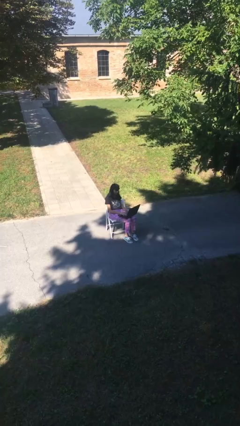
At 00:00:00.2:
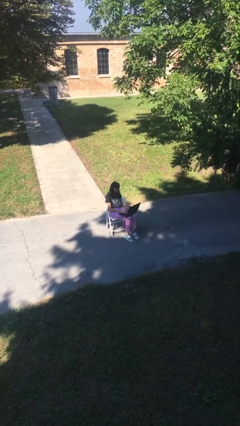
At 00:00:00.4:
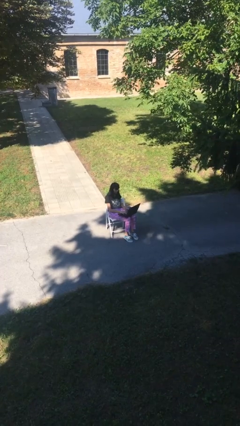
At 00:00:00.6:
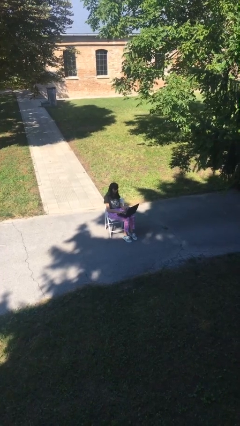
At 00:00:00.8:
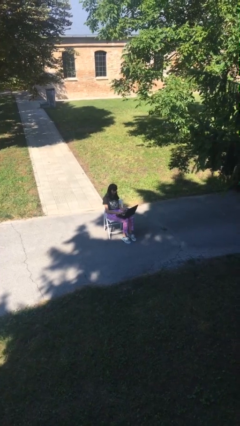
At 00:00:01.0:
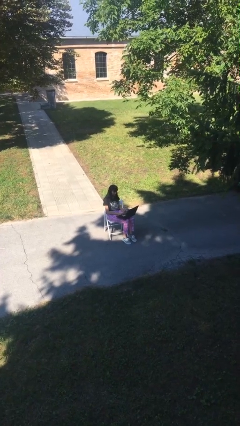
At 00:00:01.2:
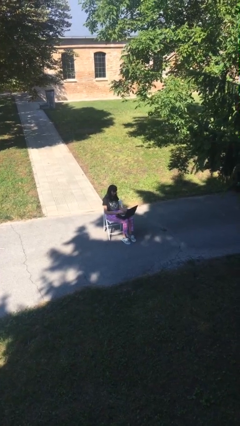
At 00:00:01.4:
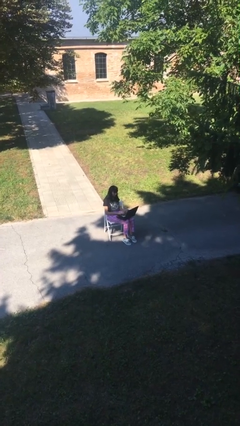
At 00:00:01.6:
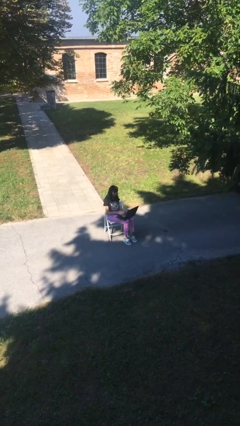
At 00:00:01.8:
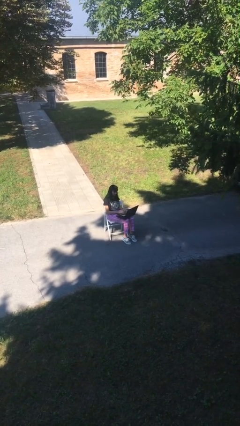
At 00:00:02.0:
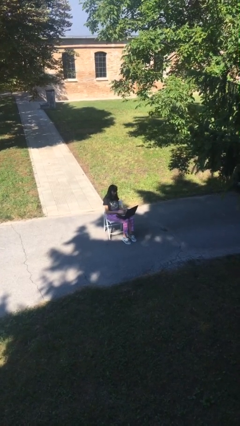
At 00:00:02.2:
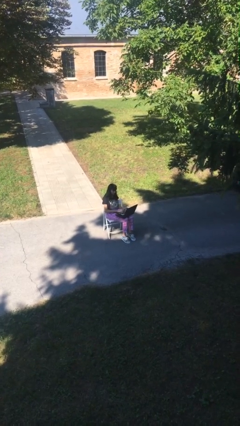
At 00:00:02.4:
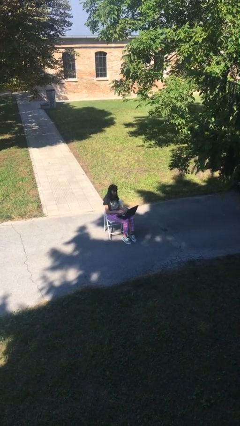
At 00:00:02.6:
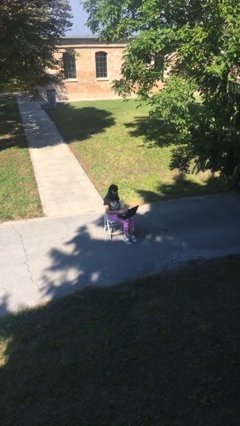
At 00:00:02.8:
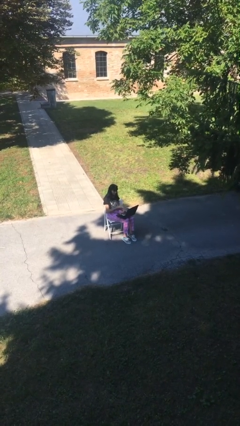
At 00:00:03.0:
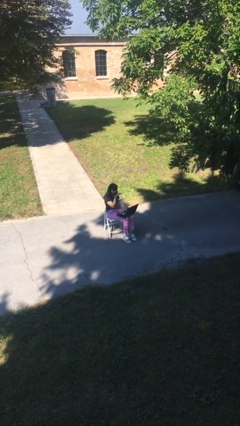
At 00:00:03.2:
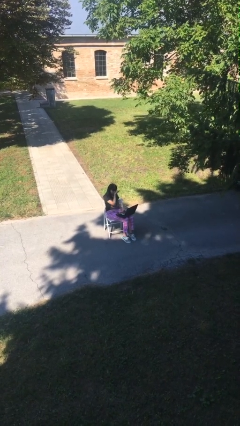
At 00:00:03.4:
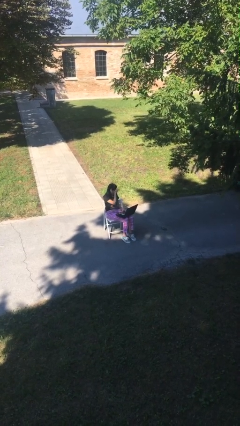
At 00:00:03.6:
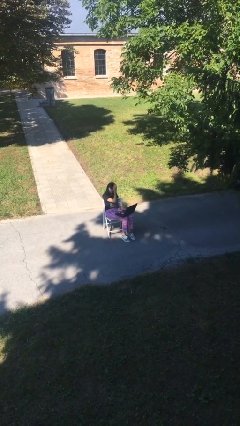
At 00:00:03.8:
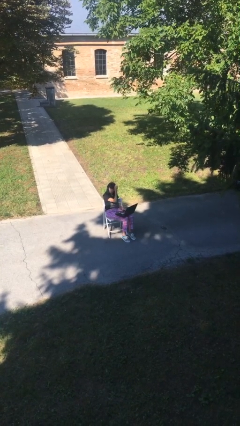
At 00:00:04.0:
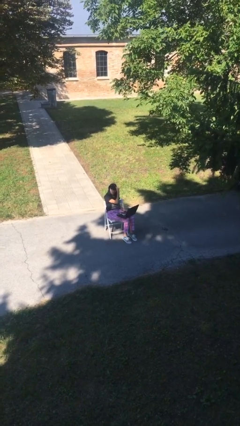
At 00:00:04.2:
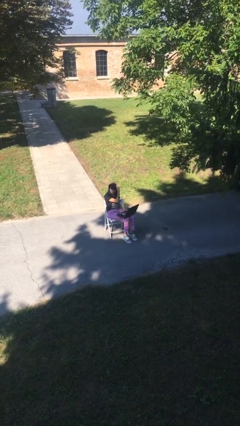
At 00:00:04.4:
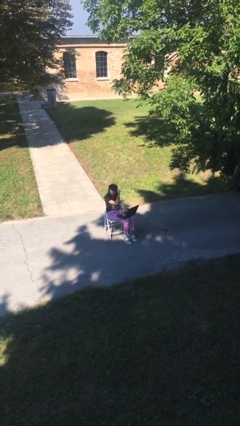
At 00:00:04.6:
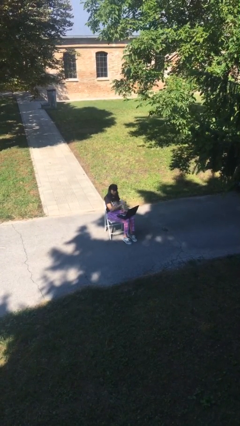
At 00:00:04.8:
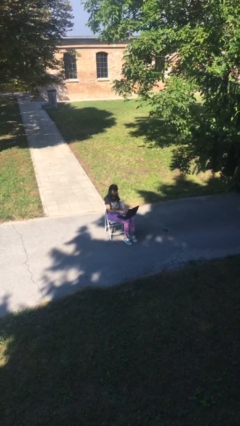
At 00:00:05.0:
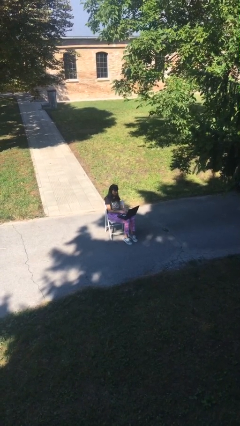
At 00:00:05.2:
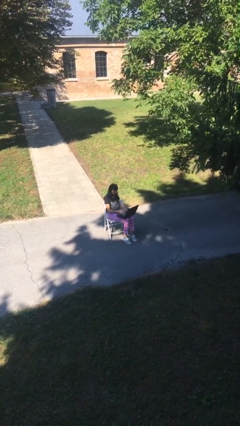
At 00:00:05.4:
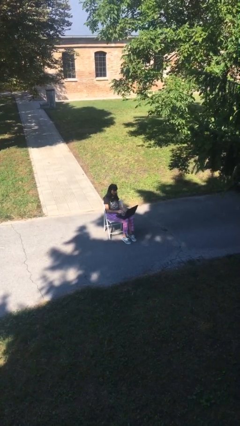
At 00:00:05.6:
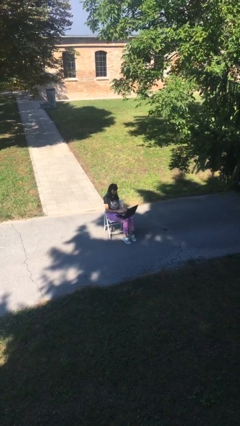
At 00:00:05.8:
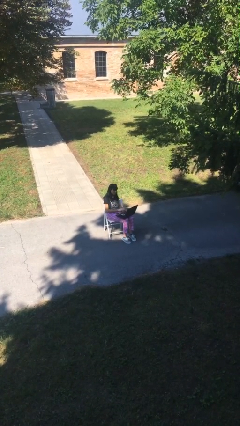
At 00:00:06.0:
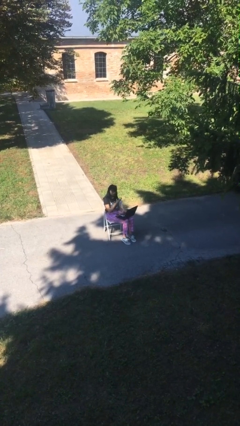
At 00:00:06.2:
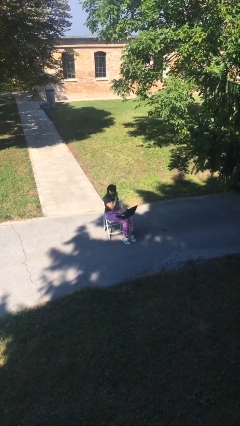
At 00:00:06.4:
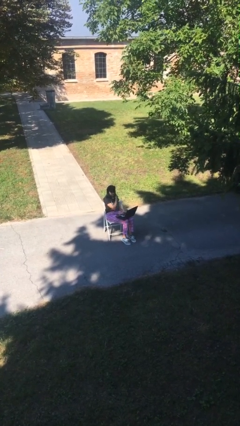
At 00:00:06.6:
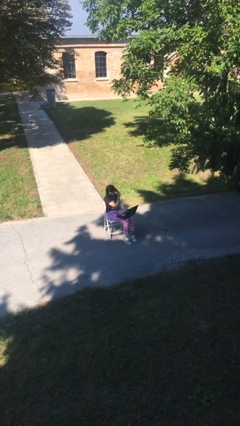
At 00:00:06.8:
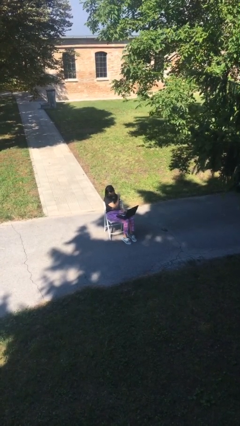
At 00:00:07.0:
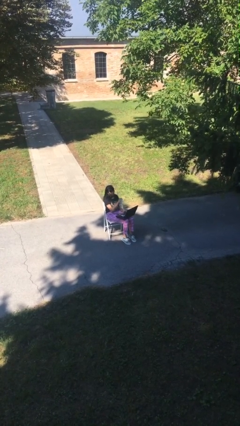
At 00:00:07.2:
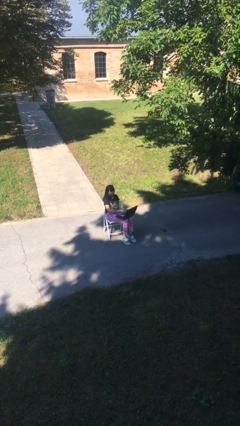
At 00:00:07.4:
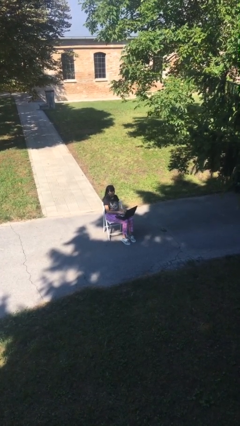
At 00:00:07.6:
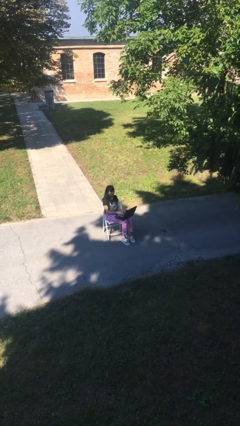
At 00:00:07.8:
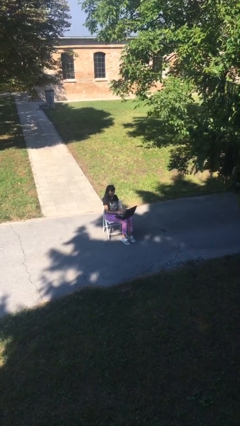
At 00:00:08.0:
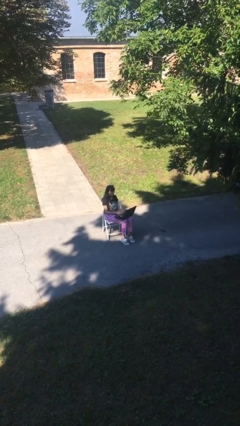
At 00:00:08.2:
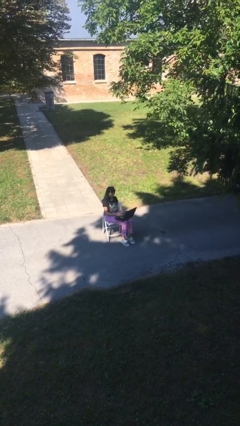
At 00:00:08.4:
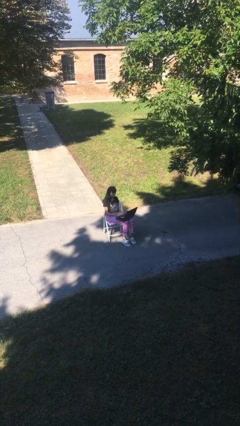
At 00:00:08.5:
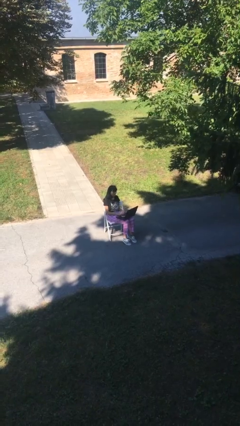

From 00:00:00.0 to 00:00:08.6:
person interacts with laptop

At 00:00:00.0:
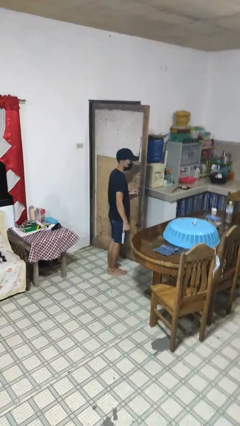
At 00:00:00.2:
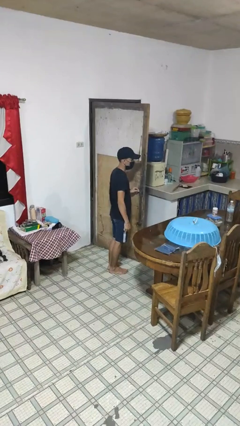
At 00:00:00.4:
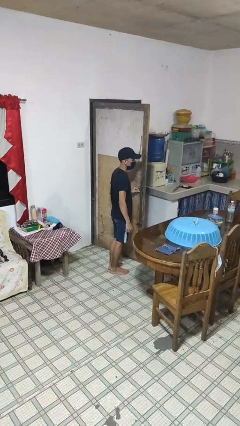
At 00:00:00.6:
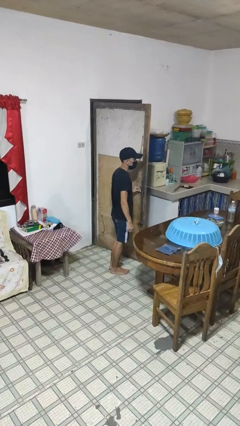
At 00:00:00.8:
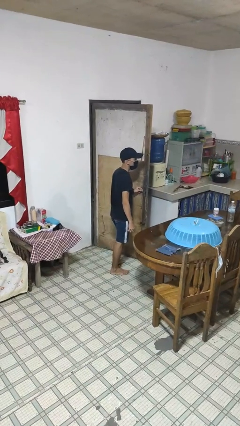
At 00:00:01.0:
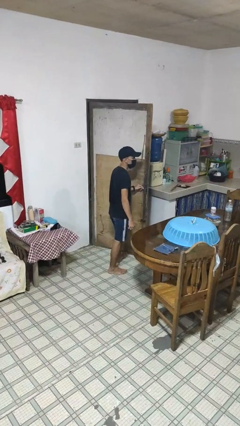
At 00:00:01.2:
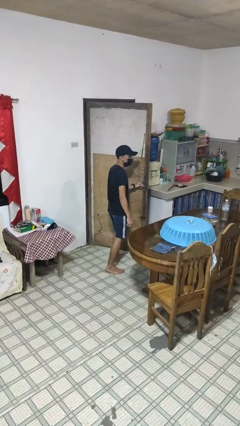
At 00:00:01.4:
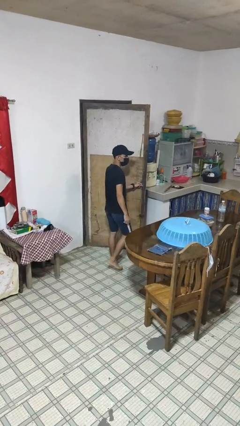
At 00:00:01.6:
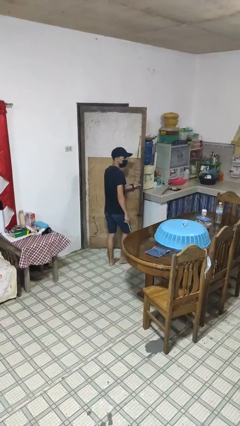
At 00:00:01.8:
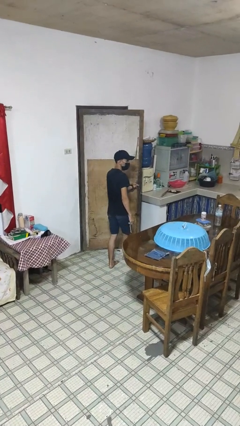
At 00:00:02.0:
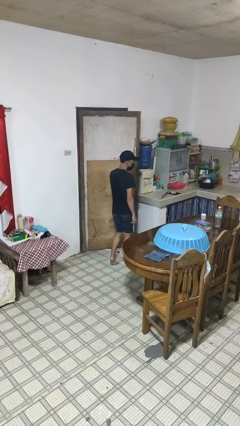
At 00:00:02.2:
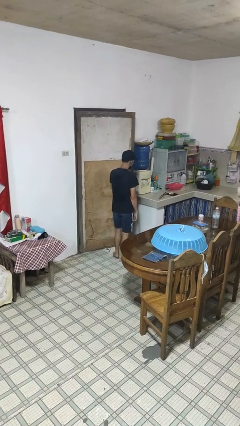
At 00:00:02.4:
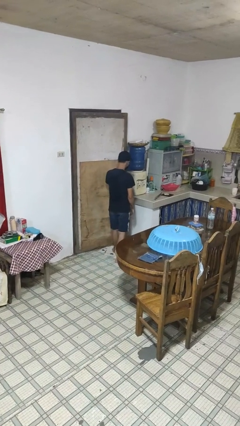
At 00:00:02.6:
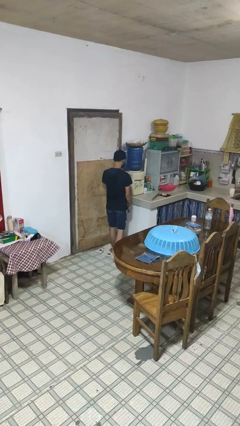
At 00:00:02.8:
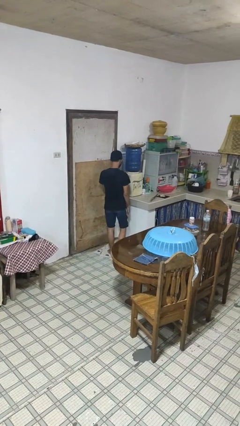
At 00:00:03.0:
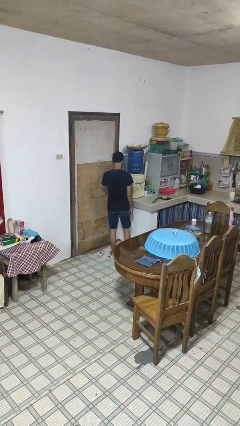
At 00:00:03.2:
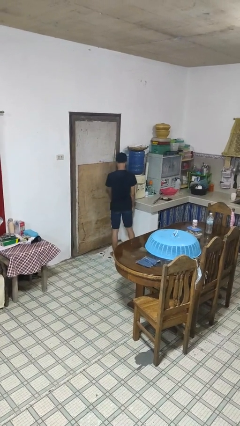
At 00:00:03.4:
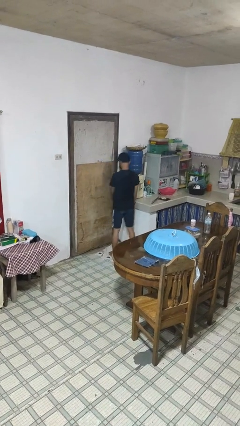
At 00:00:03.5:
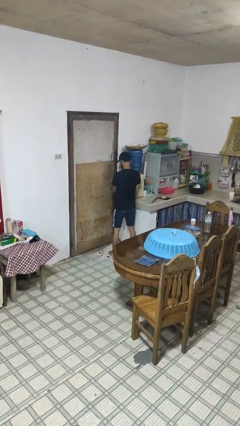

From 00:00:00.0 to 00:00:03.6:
person closes facility door

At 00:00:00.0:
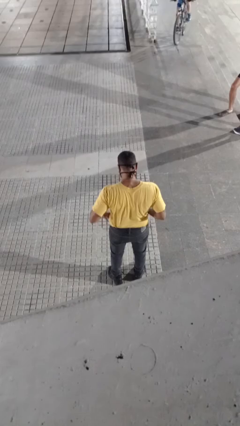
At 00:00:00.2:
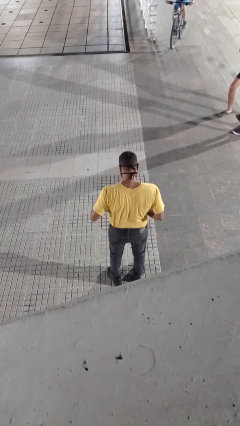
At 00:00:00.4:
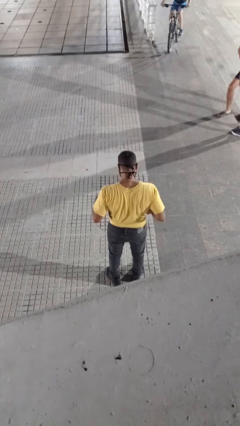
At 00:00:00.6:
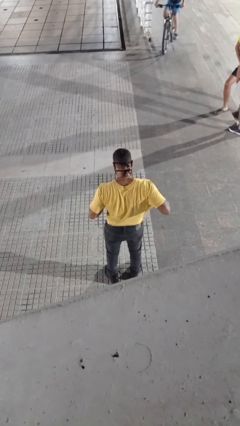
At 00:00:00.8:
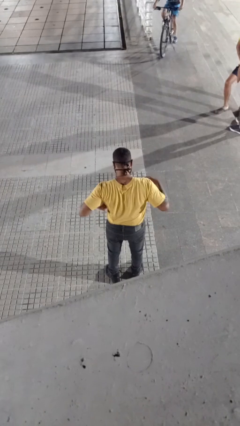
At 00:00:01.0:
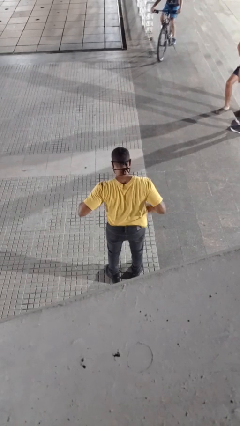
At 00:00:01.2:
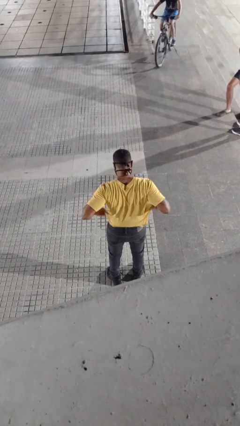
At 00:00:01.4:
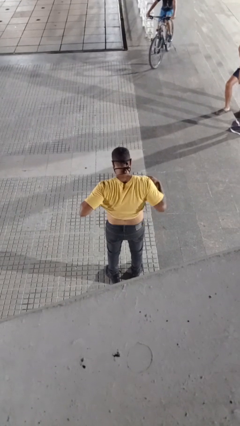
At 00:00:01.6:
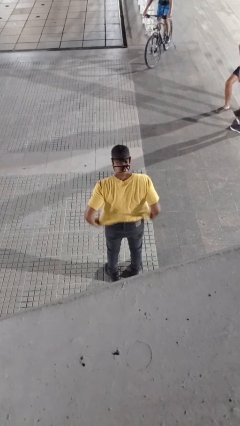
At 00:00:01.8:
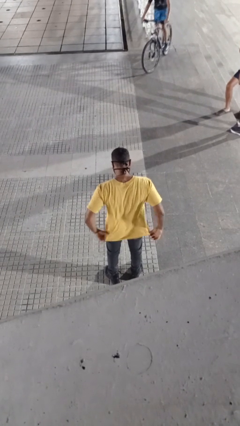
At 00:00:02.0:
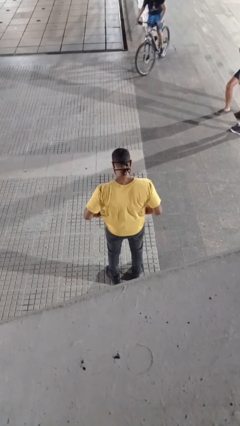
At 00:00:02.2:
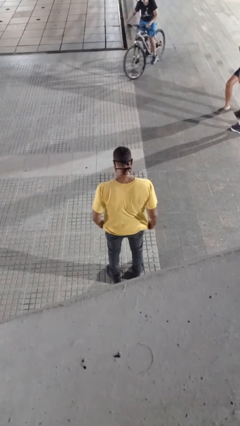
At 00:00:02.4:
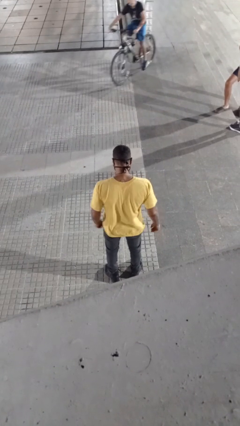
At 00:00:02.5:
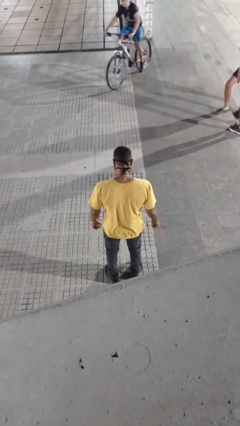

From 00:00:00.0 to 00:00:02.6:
person untucks shirt

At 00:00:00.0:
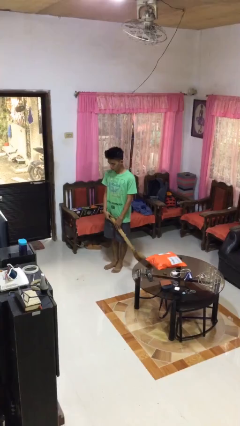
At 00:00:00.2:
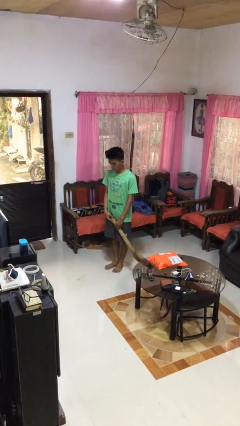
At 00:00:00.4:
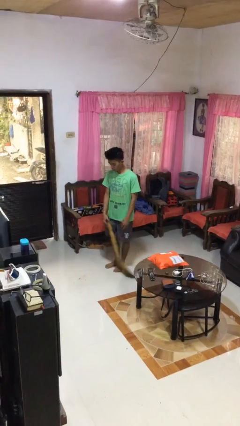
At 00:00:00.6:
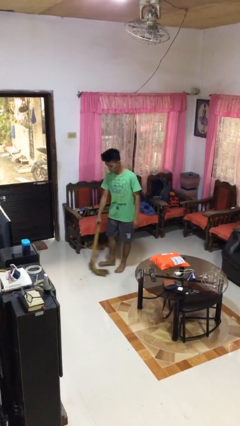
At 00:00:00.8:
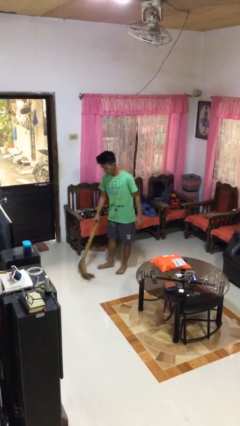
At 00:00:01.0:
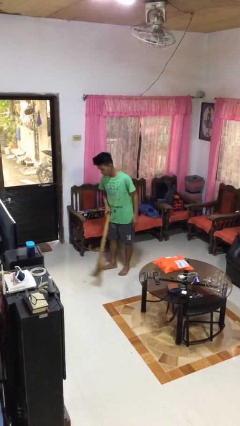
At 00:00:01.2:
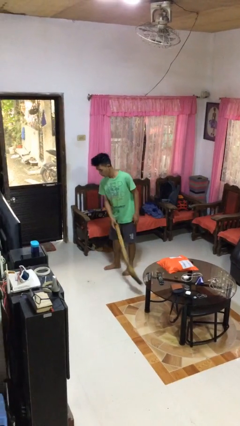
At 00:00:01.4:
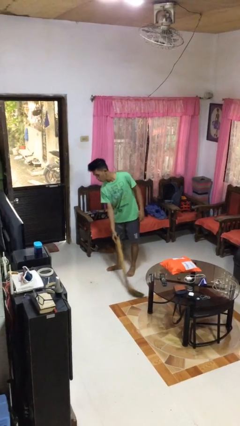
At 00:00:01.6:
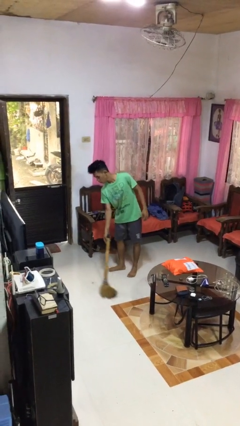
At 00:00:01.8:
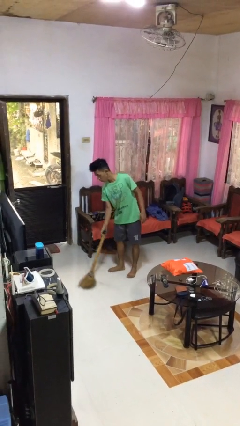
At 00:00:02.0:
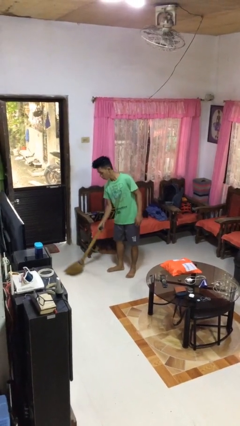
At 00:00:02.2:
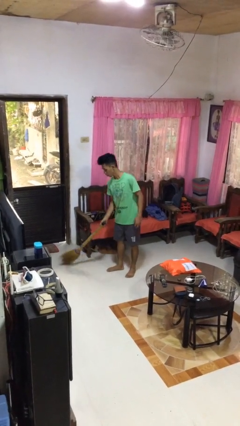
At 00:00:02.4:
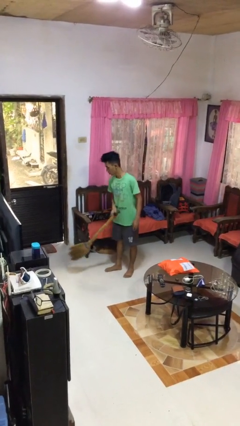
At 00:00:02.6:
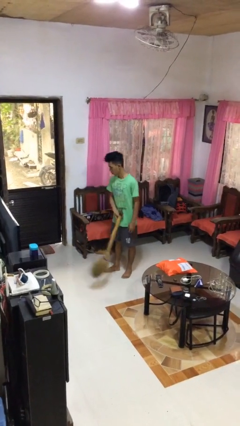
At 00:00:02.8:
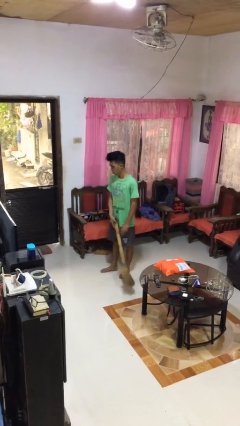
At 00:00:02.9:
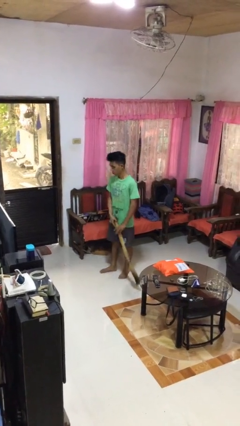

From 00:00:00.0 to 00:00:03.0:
person sweeps floor
